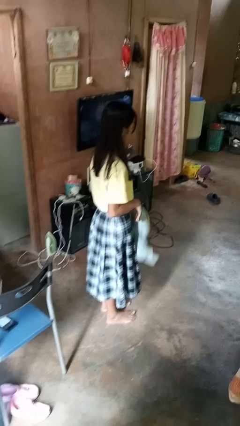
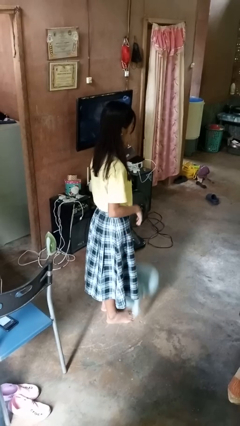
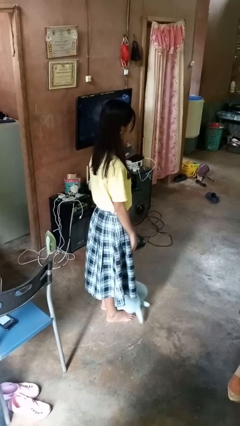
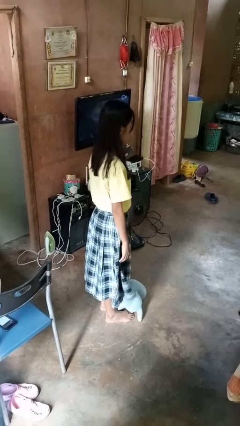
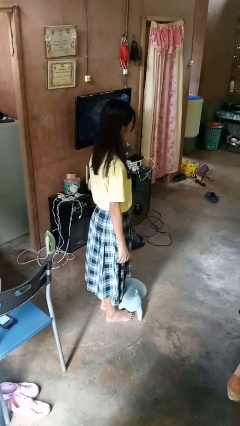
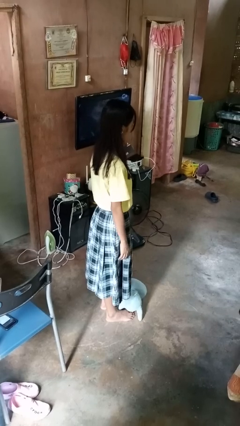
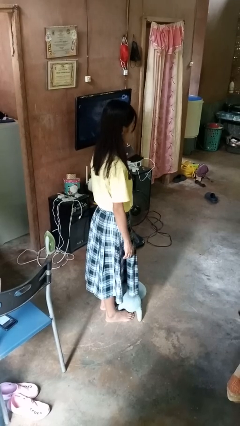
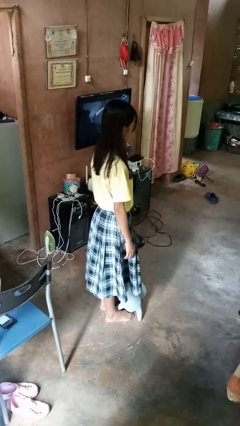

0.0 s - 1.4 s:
person drops object

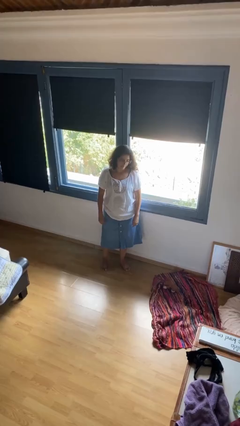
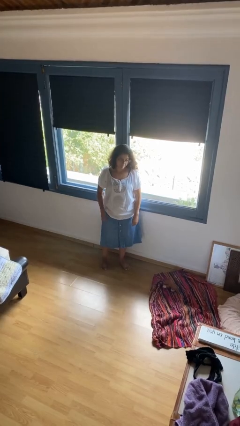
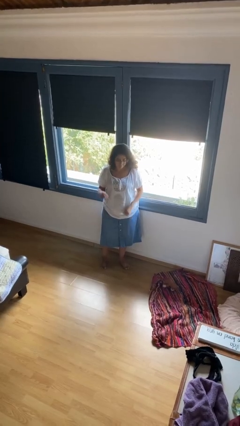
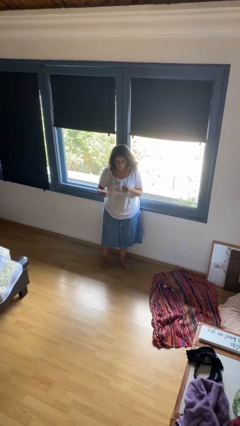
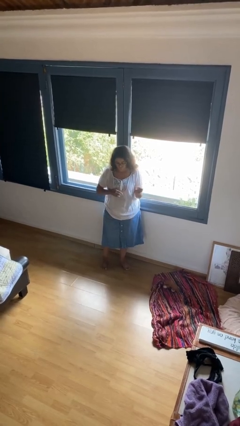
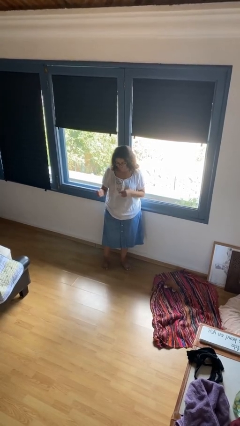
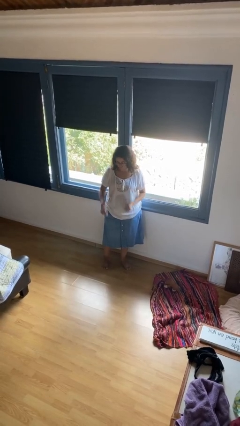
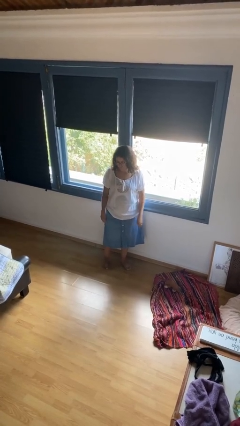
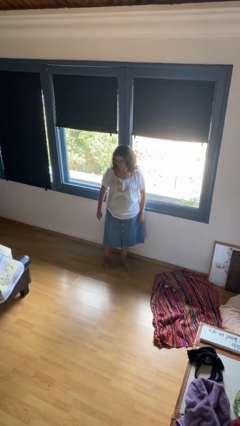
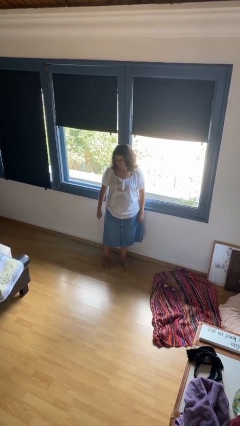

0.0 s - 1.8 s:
person snaps fingers

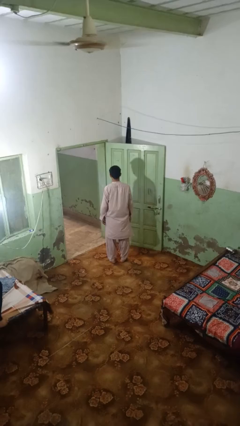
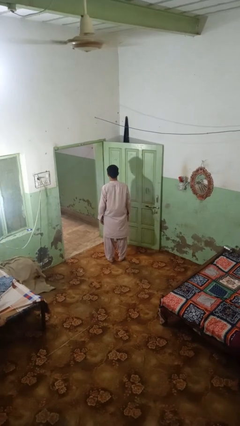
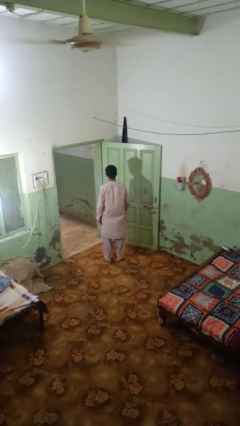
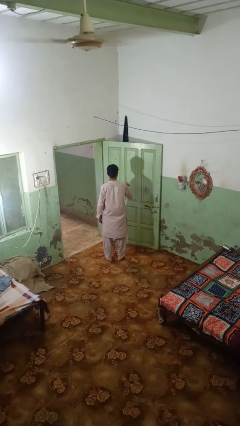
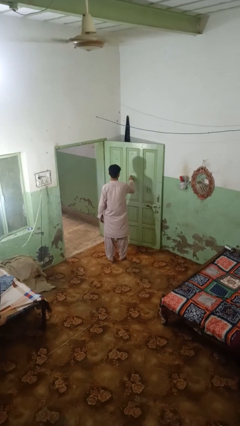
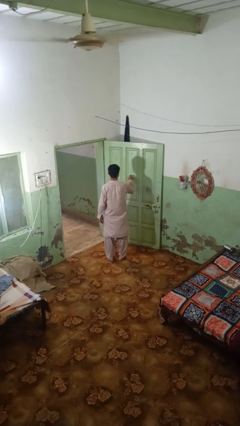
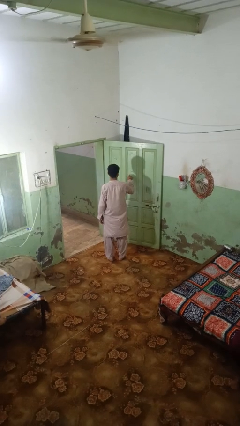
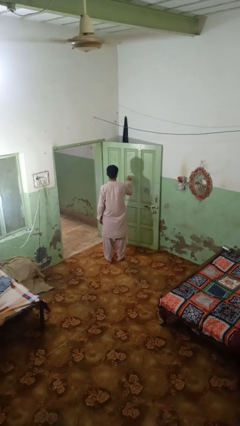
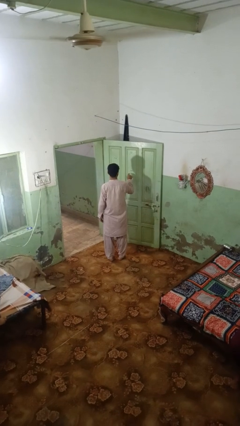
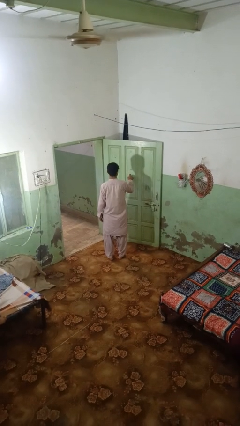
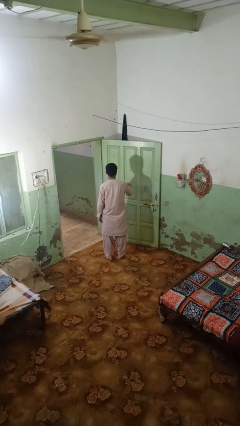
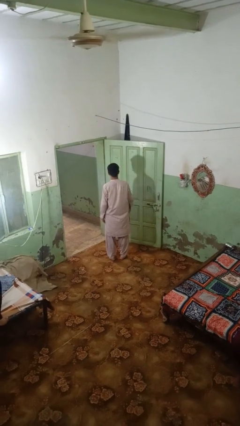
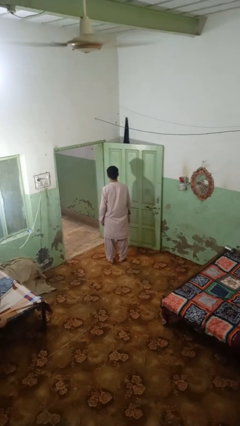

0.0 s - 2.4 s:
person taps object with finger

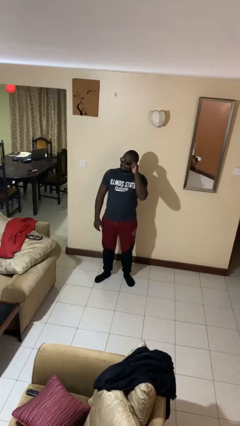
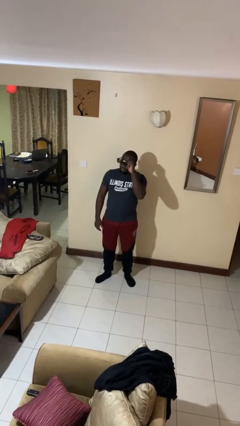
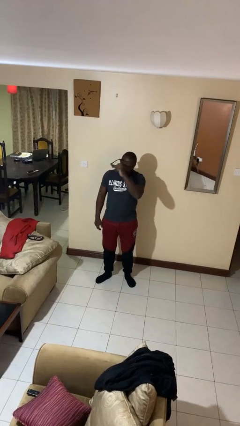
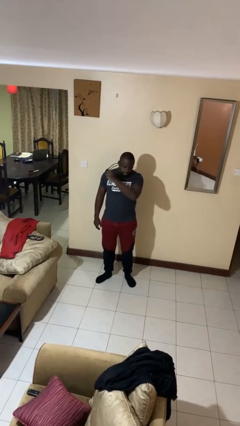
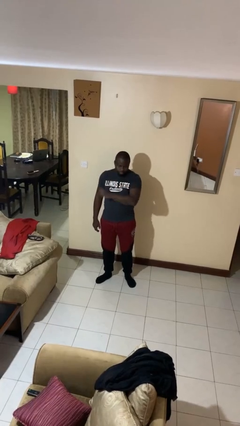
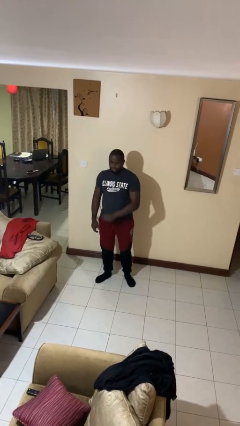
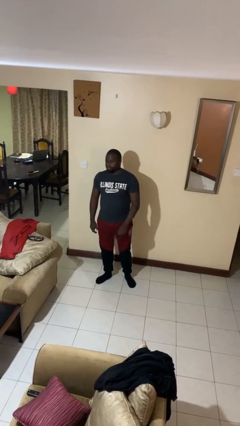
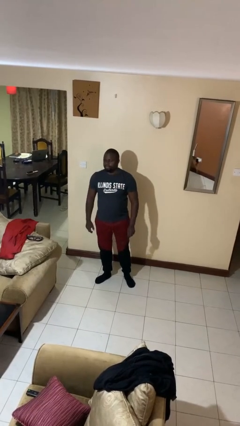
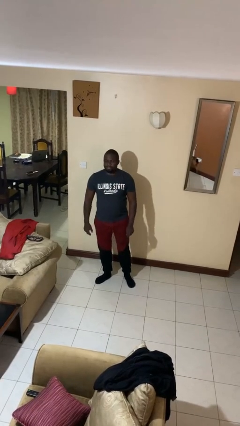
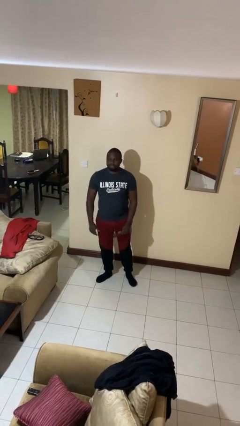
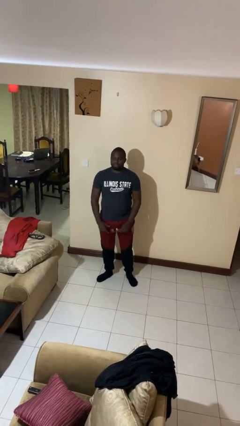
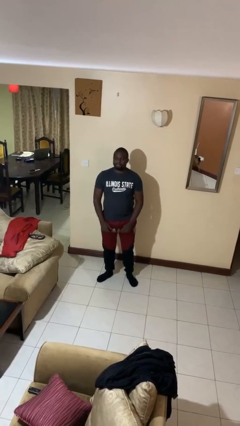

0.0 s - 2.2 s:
person takes off sunglasses

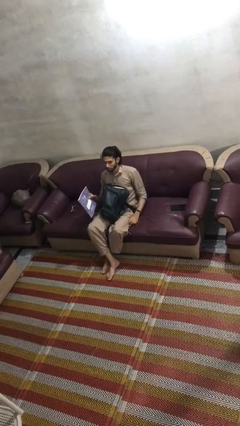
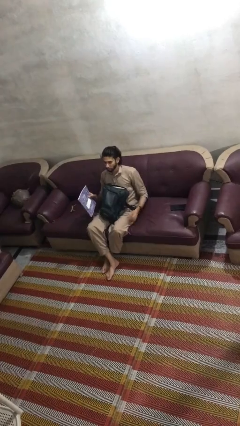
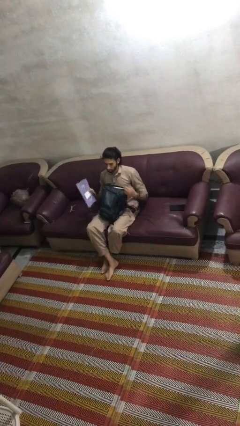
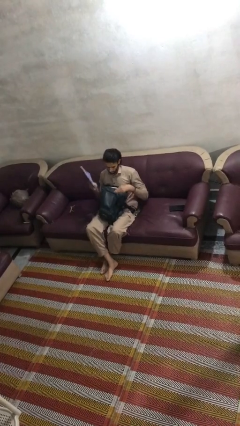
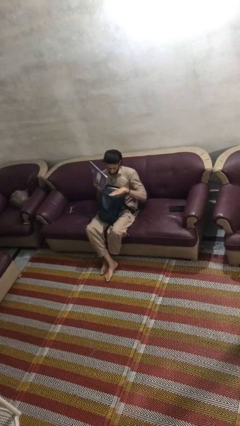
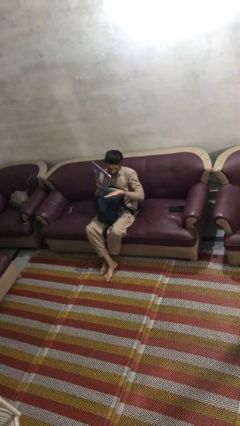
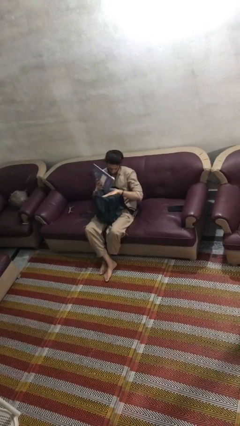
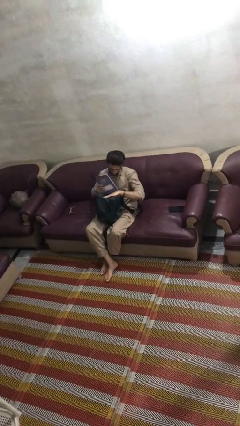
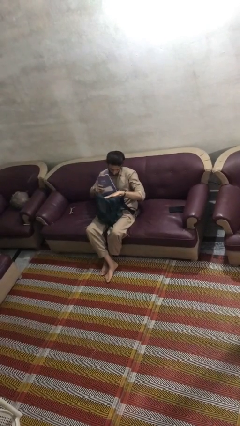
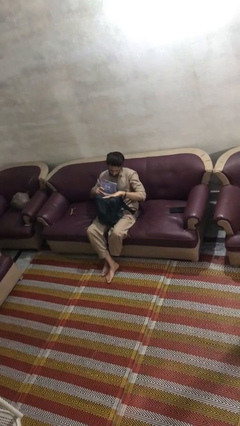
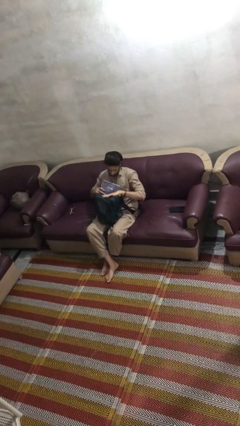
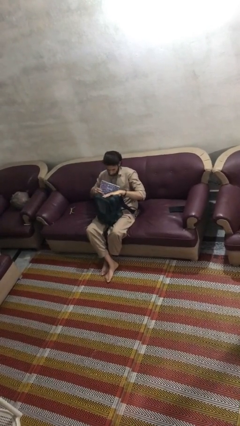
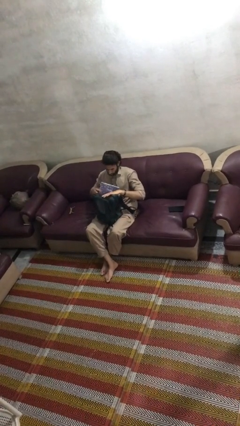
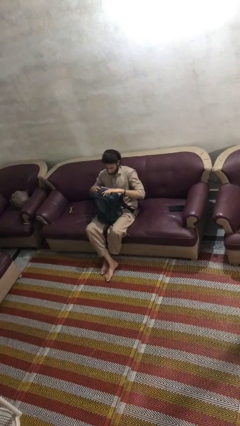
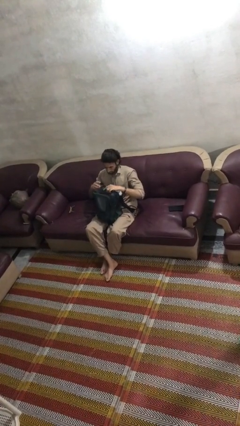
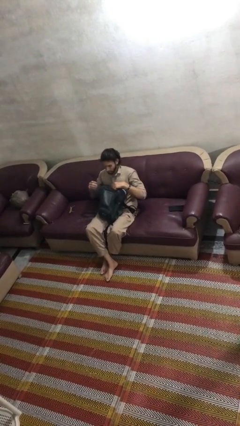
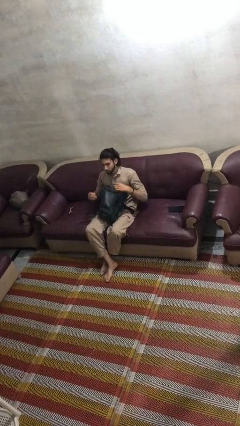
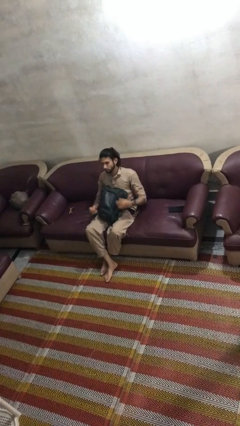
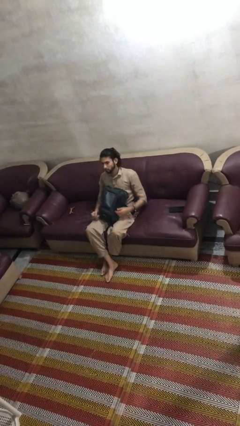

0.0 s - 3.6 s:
person puts object into backpack

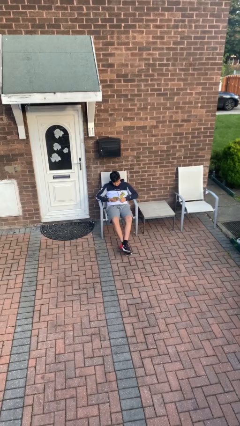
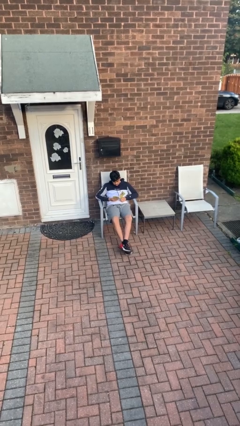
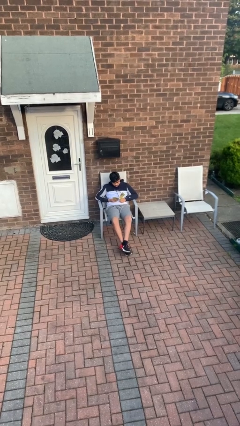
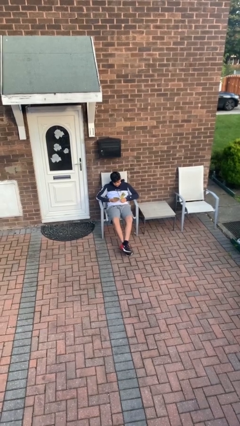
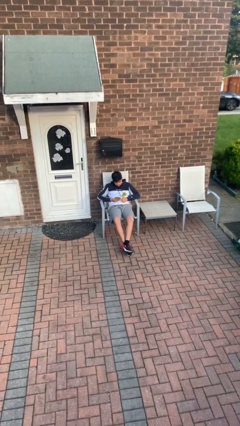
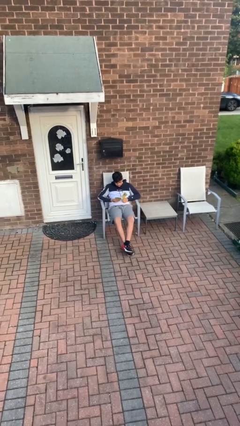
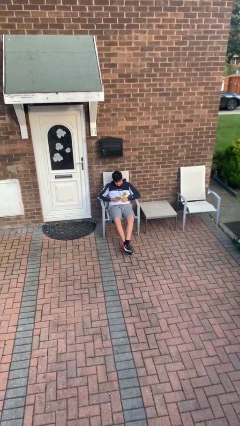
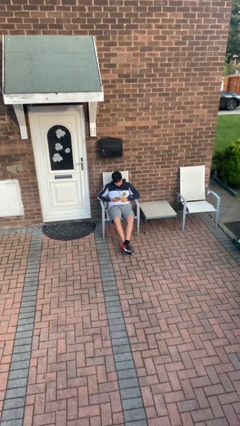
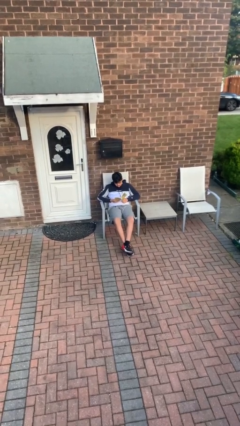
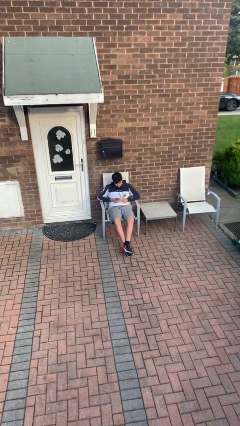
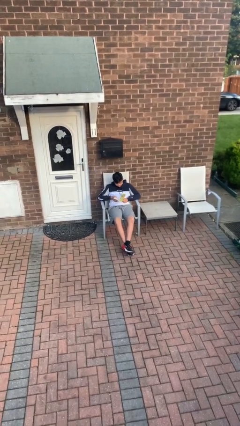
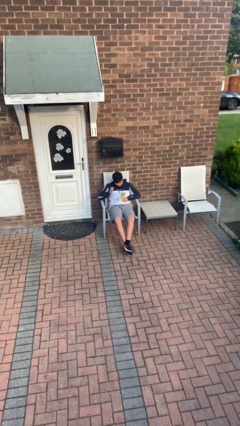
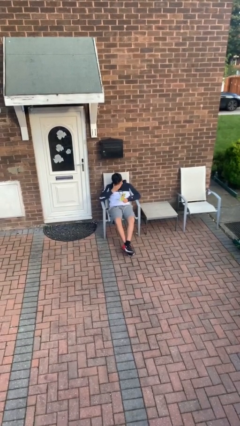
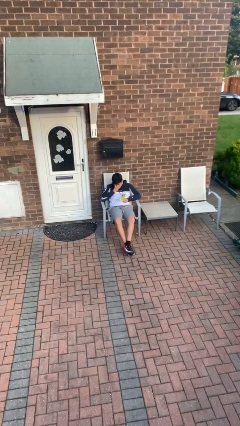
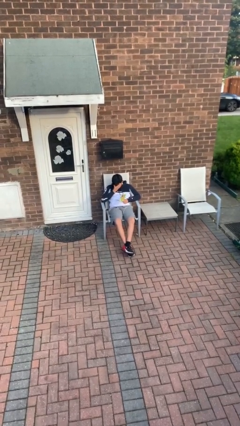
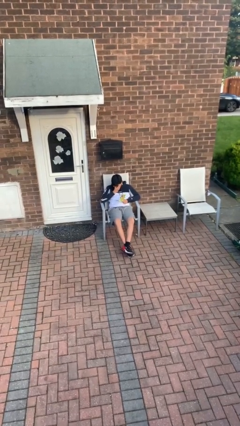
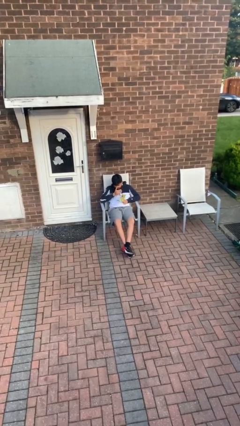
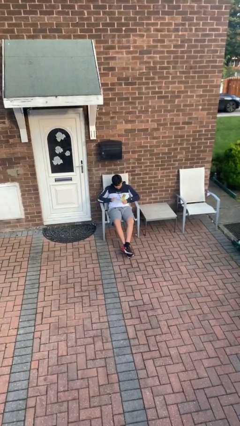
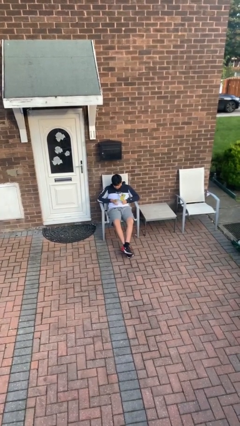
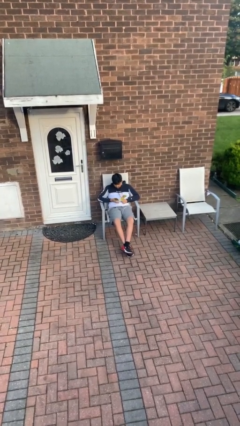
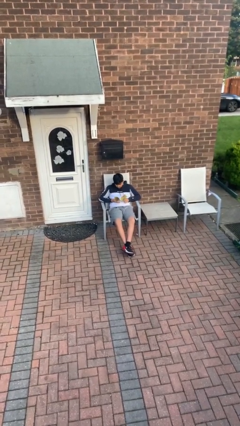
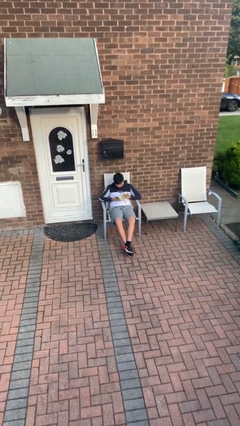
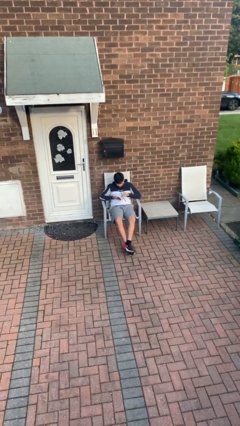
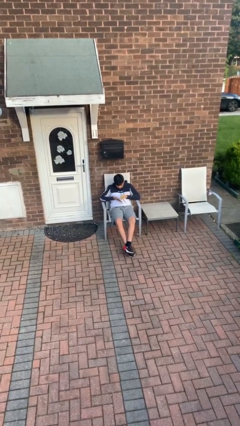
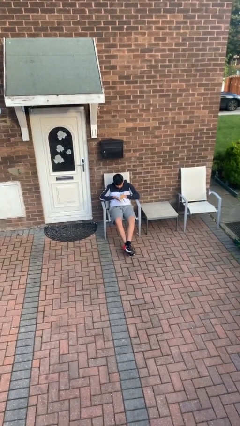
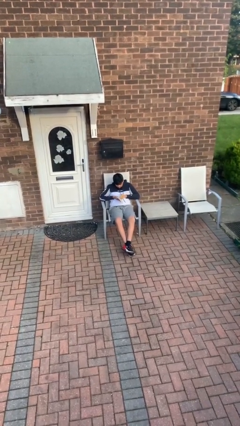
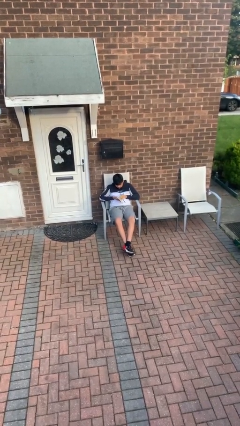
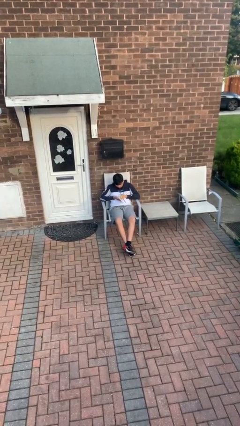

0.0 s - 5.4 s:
person reads document

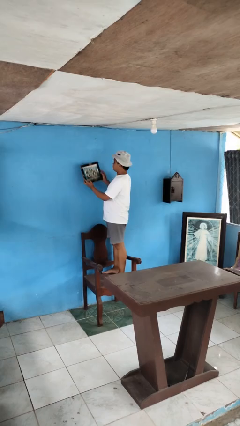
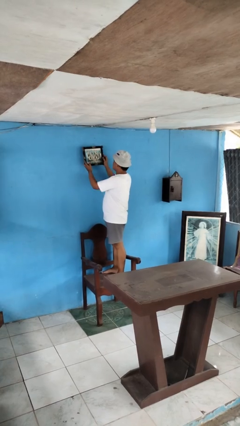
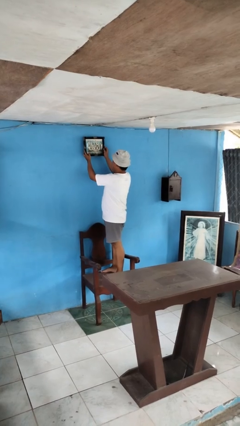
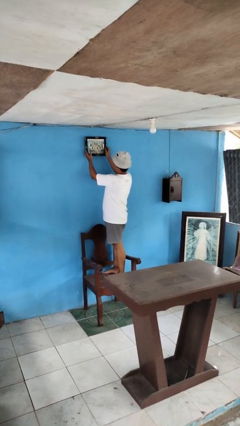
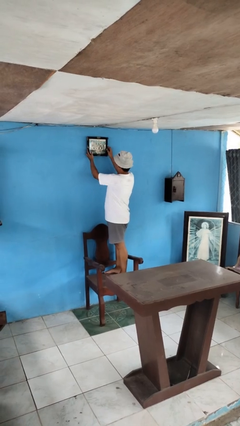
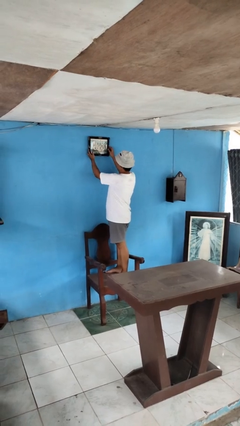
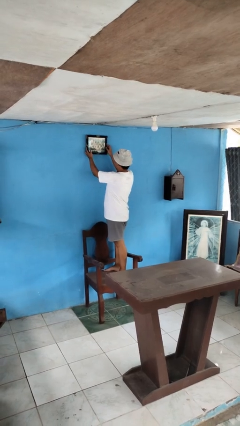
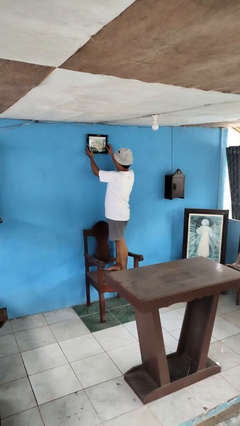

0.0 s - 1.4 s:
person puts up picture frame
